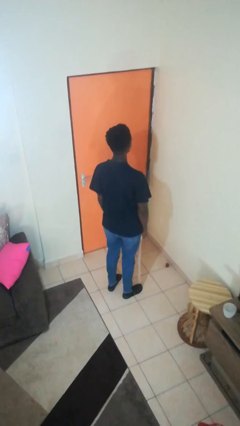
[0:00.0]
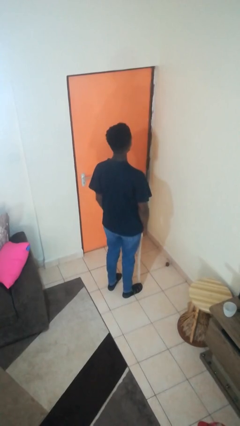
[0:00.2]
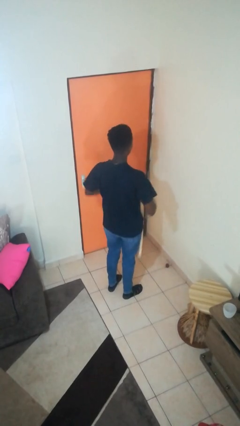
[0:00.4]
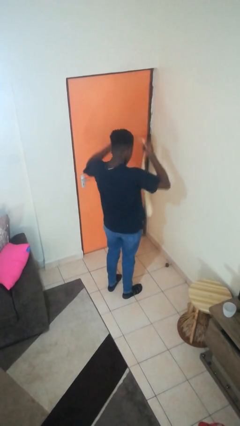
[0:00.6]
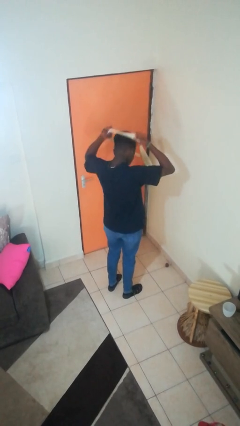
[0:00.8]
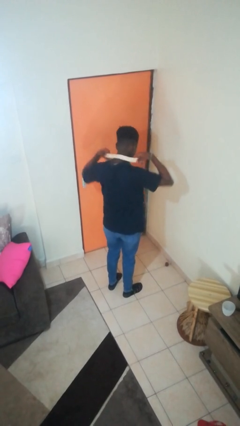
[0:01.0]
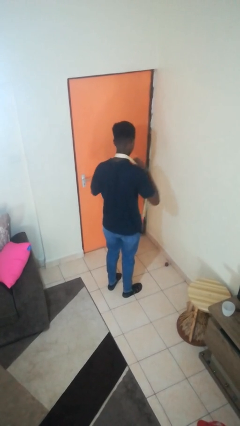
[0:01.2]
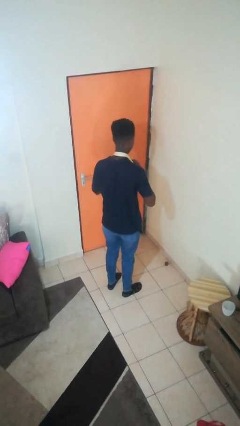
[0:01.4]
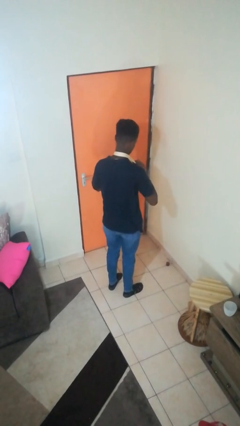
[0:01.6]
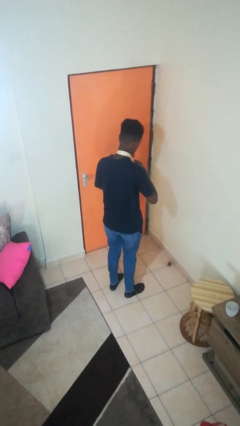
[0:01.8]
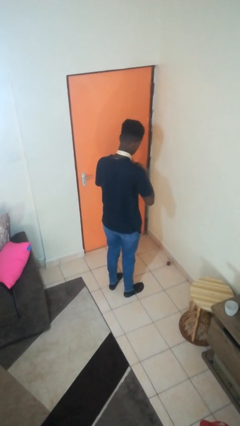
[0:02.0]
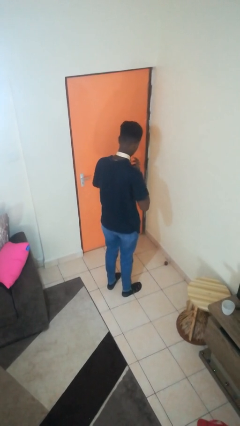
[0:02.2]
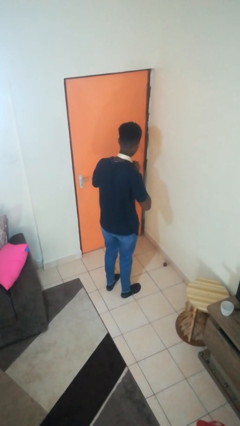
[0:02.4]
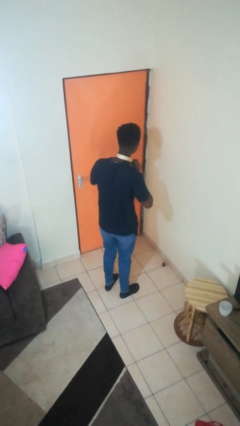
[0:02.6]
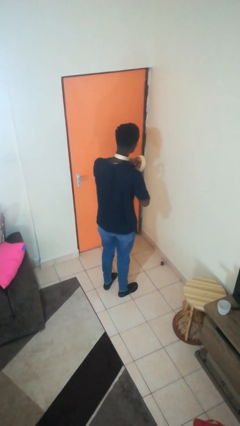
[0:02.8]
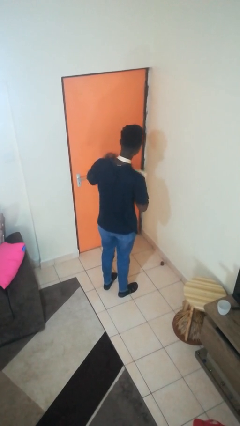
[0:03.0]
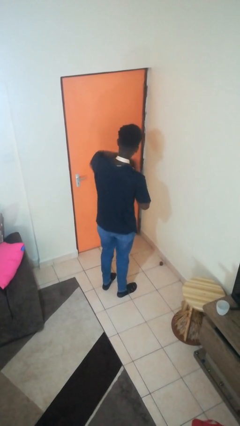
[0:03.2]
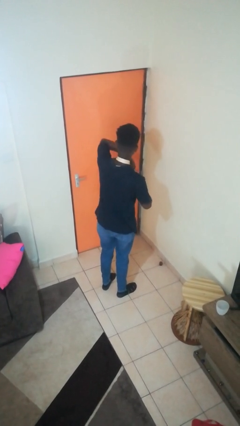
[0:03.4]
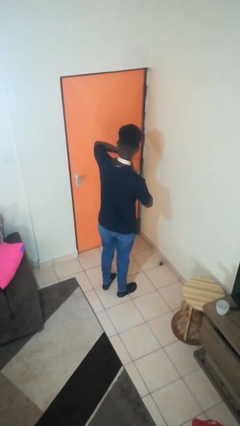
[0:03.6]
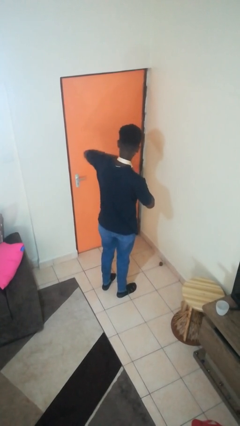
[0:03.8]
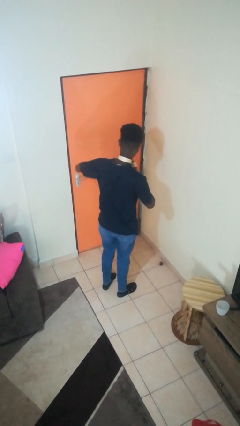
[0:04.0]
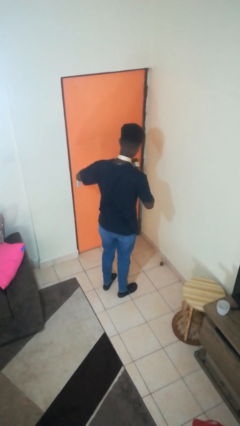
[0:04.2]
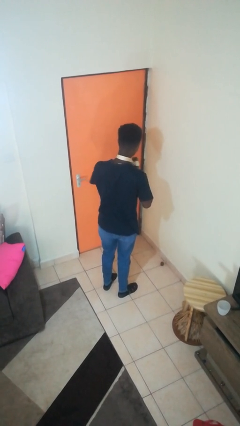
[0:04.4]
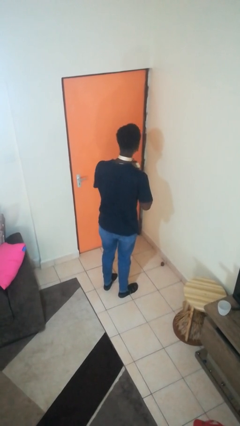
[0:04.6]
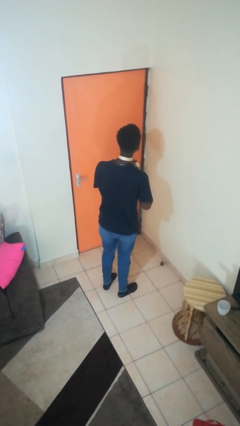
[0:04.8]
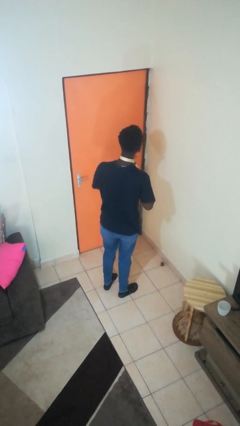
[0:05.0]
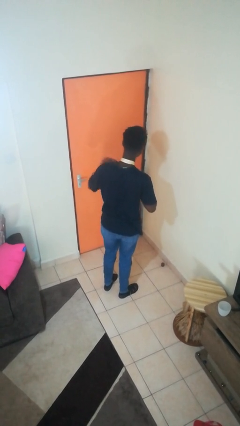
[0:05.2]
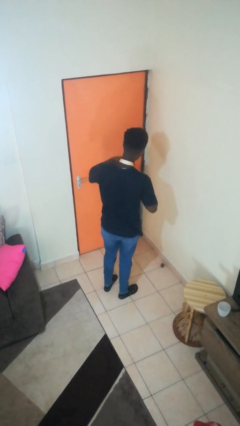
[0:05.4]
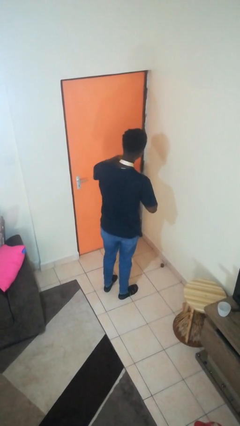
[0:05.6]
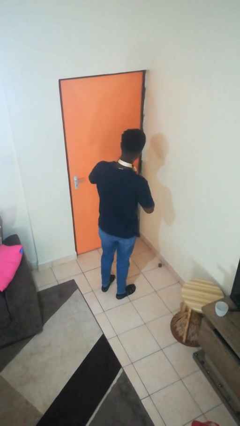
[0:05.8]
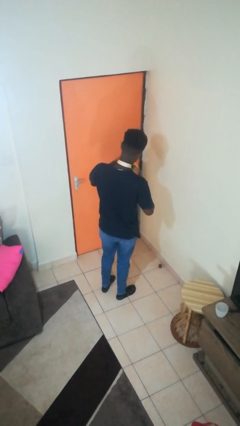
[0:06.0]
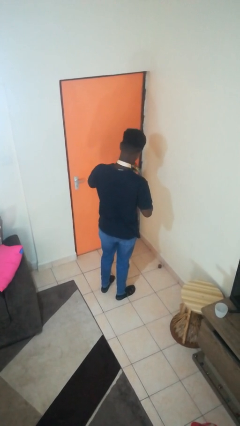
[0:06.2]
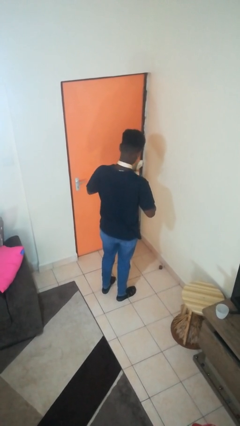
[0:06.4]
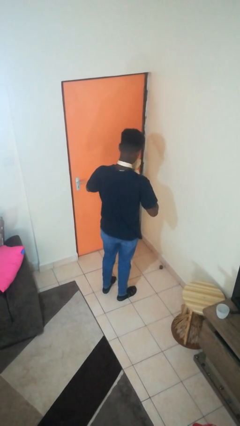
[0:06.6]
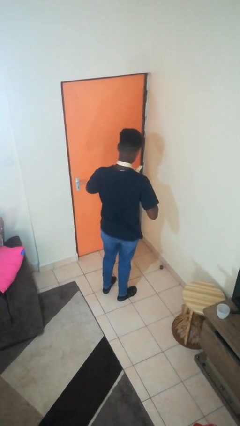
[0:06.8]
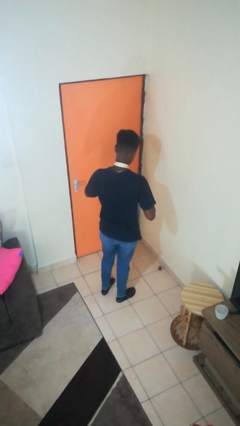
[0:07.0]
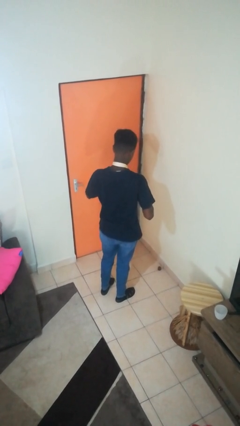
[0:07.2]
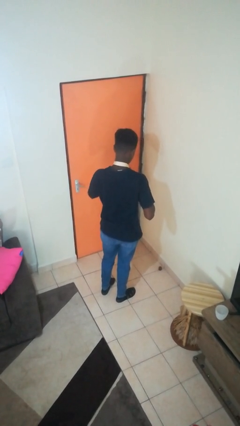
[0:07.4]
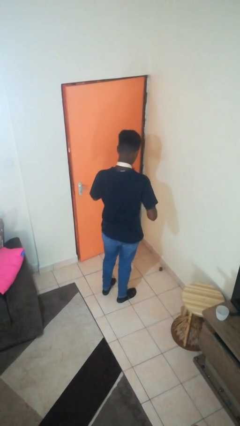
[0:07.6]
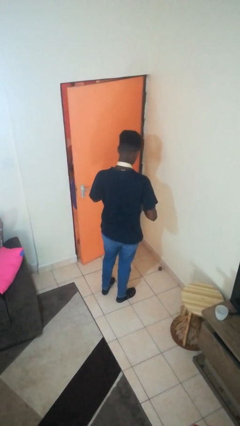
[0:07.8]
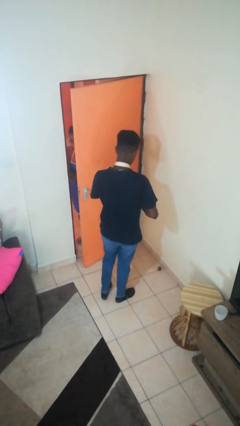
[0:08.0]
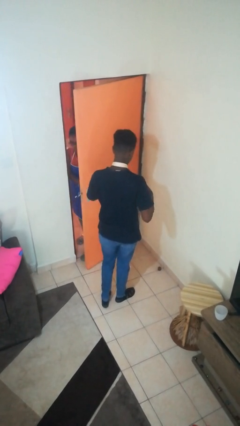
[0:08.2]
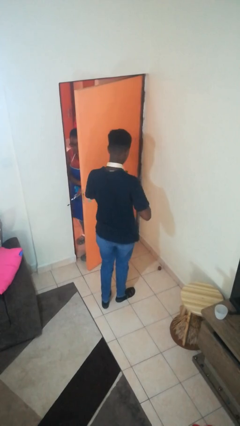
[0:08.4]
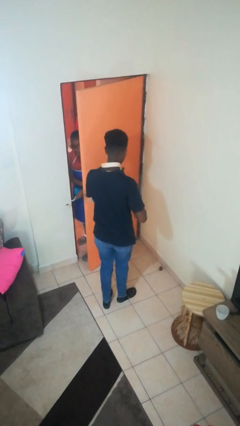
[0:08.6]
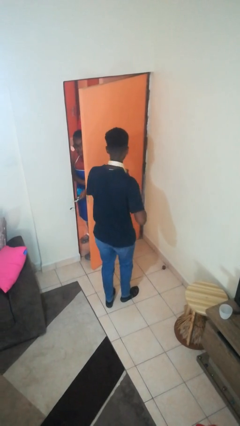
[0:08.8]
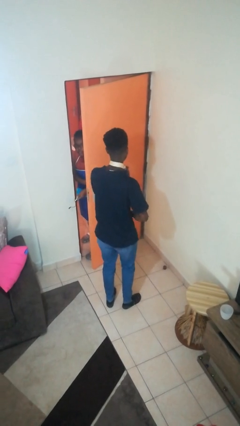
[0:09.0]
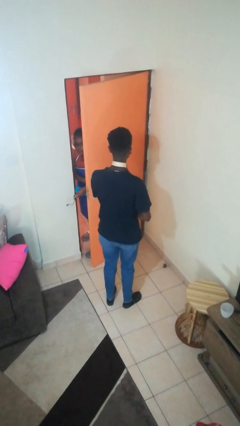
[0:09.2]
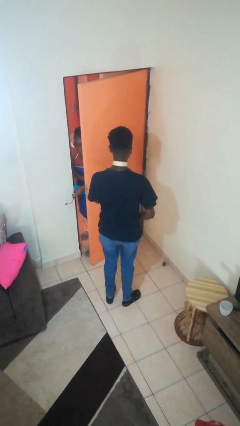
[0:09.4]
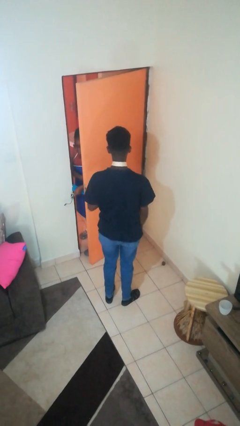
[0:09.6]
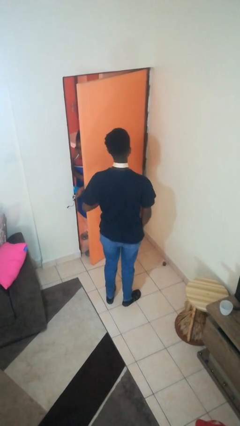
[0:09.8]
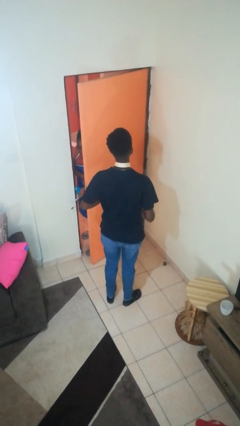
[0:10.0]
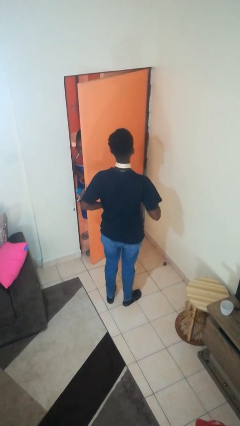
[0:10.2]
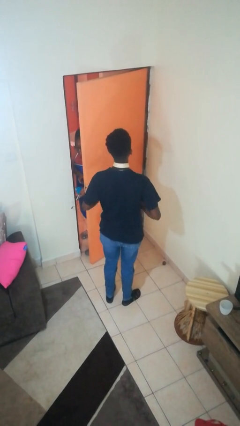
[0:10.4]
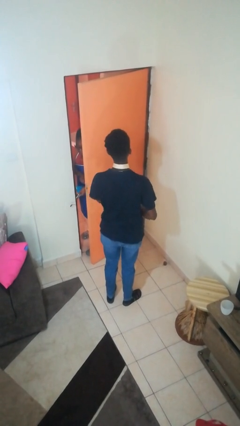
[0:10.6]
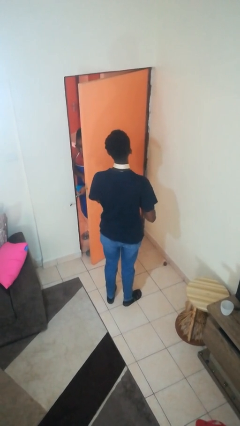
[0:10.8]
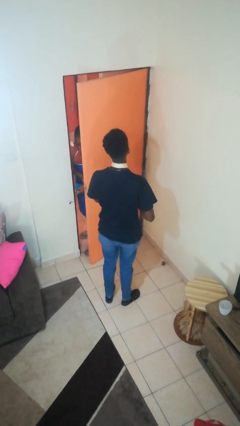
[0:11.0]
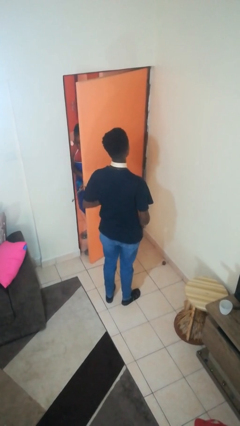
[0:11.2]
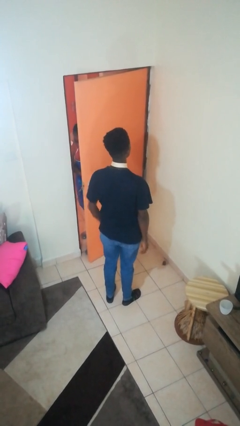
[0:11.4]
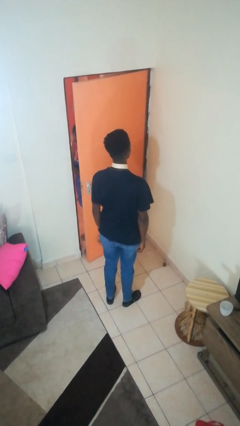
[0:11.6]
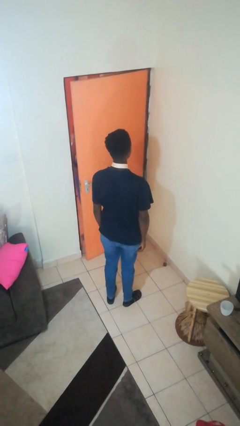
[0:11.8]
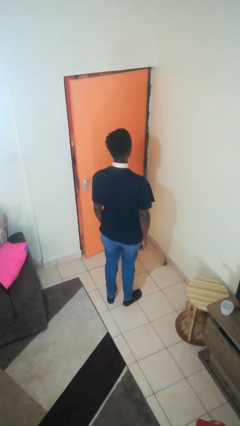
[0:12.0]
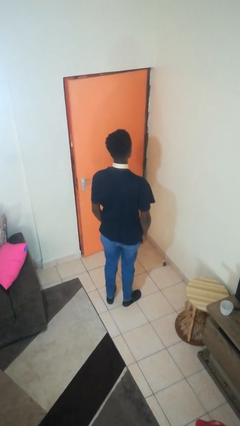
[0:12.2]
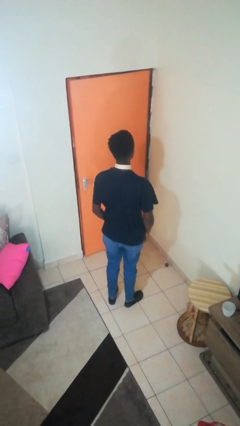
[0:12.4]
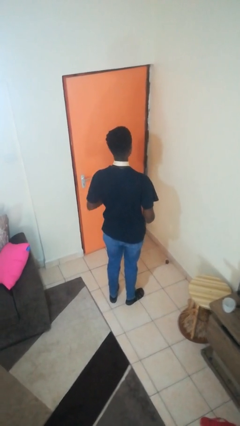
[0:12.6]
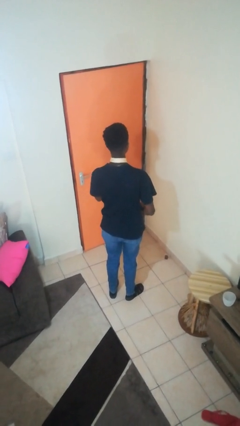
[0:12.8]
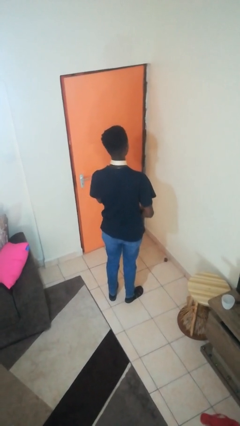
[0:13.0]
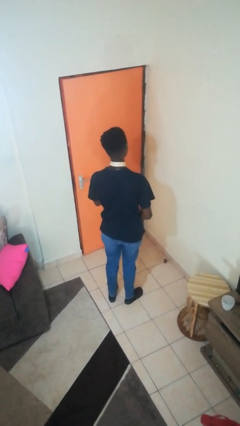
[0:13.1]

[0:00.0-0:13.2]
person puts on necktie

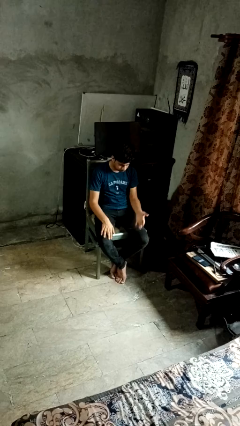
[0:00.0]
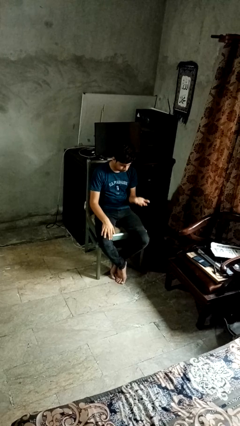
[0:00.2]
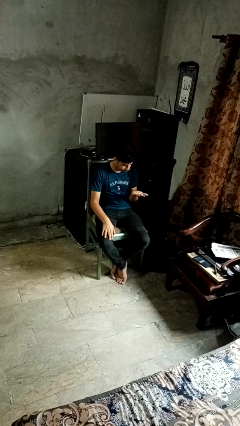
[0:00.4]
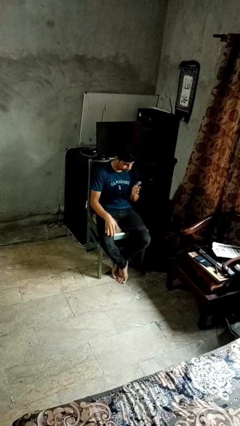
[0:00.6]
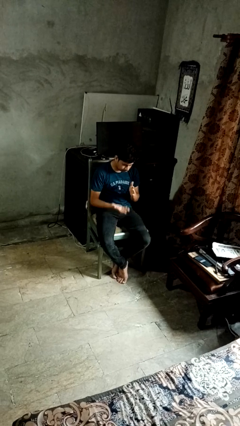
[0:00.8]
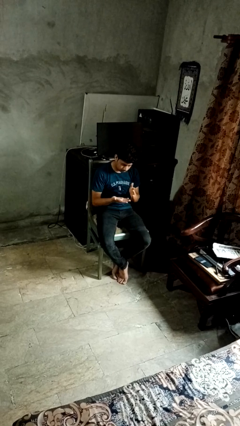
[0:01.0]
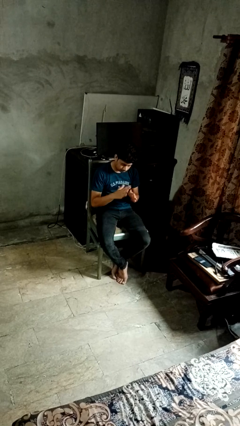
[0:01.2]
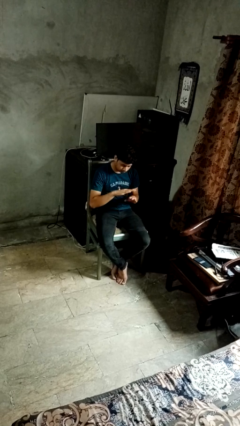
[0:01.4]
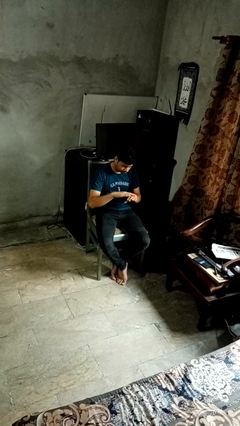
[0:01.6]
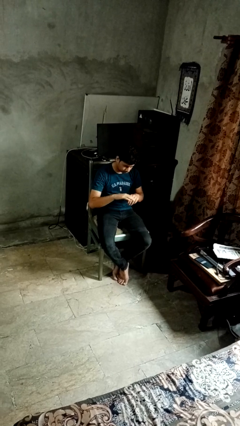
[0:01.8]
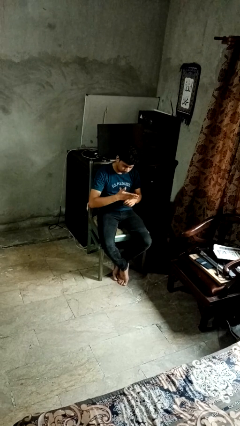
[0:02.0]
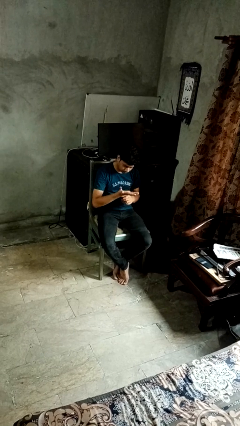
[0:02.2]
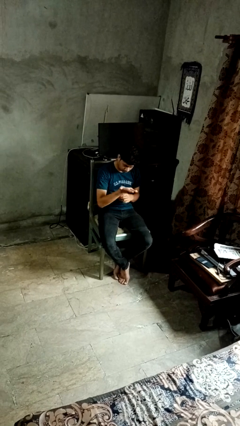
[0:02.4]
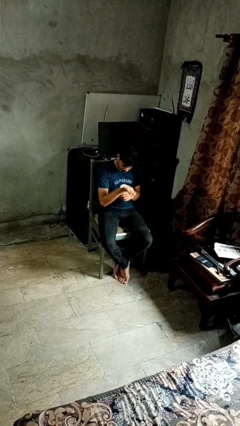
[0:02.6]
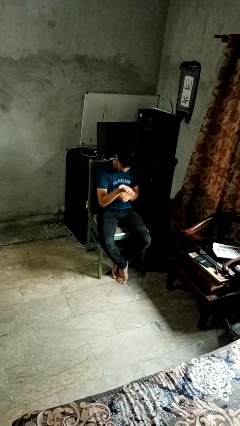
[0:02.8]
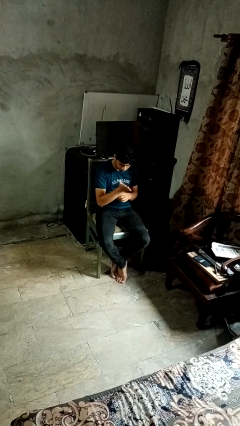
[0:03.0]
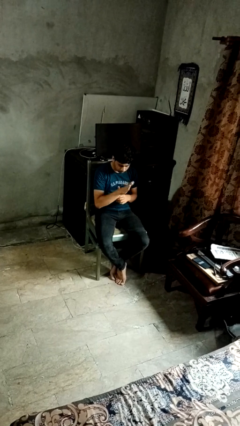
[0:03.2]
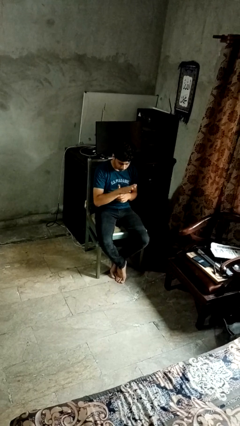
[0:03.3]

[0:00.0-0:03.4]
person looks at hands in lap

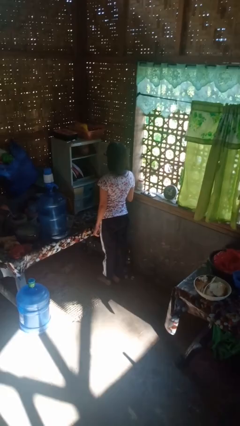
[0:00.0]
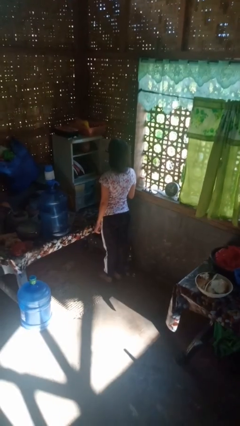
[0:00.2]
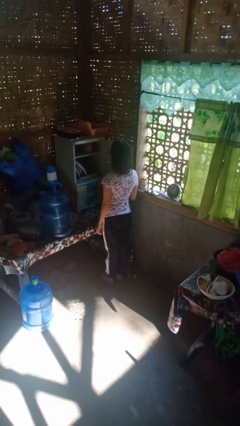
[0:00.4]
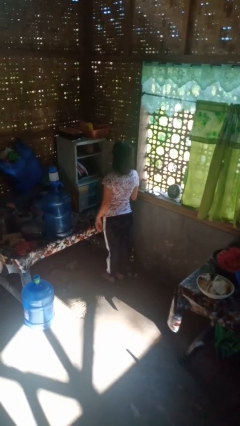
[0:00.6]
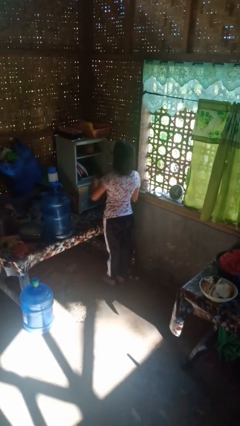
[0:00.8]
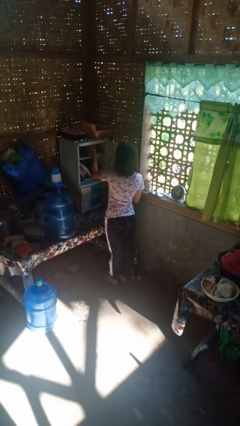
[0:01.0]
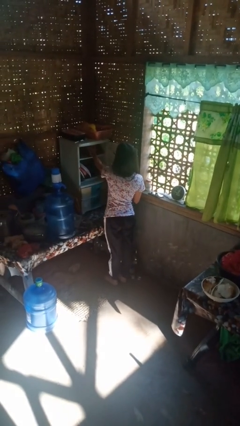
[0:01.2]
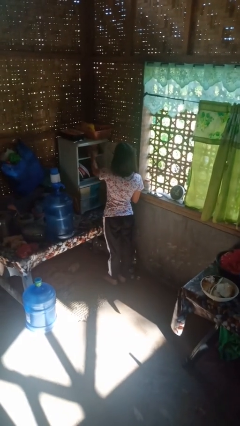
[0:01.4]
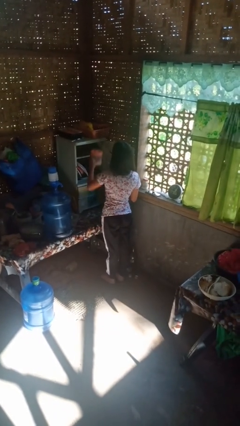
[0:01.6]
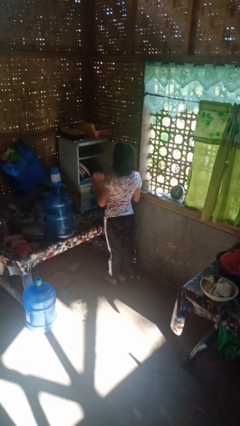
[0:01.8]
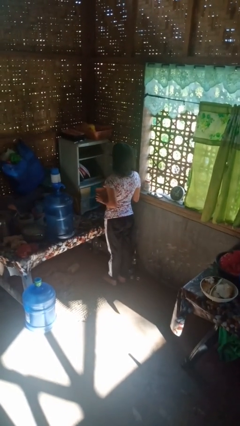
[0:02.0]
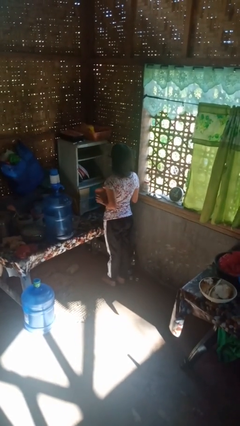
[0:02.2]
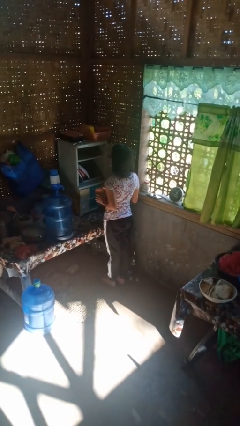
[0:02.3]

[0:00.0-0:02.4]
person picks up object from cabinet
